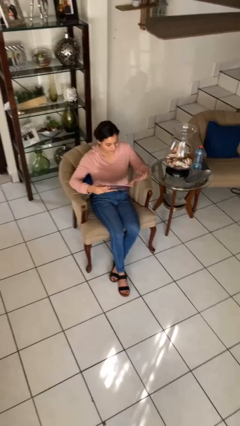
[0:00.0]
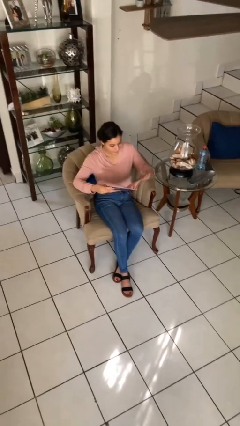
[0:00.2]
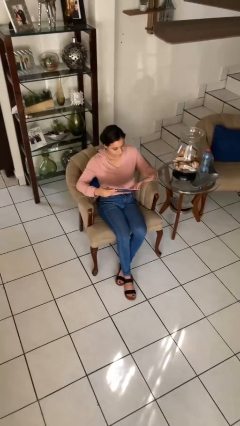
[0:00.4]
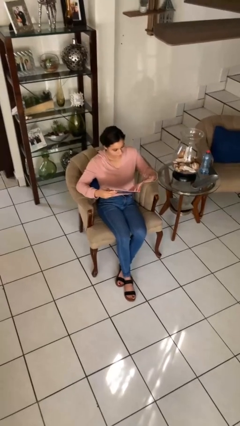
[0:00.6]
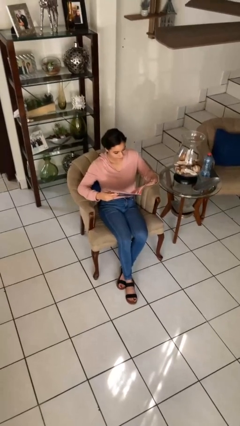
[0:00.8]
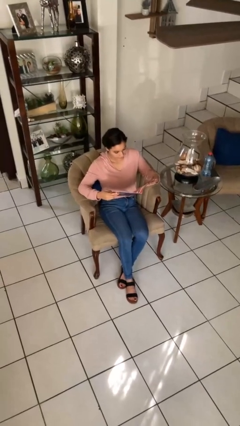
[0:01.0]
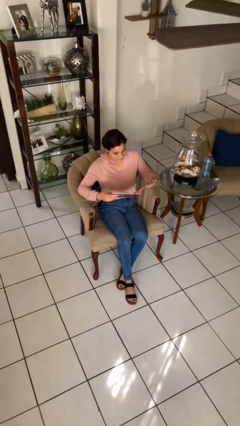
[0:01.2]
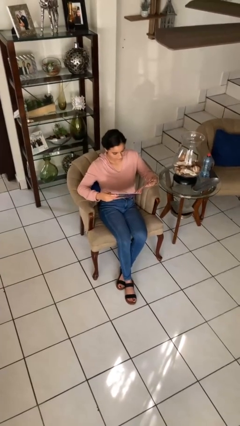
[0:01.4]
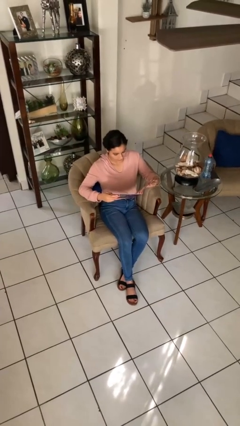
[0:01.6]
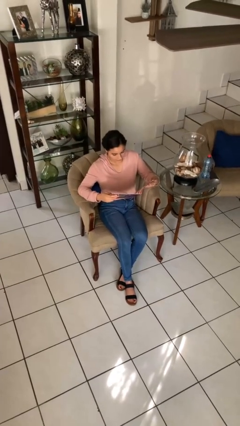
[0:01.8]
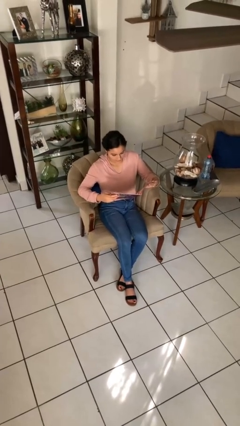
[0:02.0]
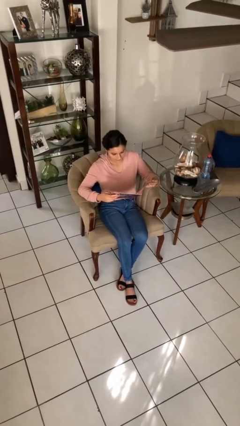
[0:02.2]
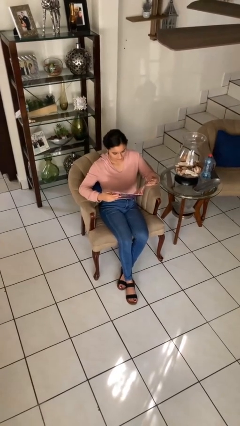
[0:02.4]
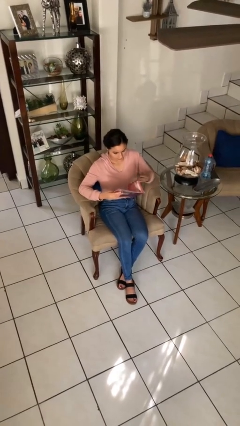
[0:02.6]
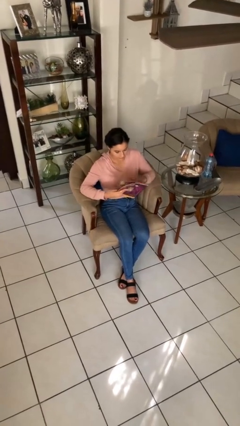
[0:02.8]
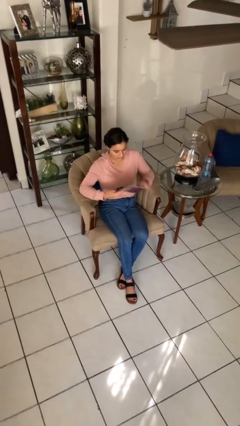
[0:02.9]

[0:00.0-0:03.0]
person reads magazine

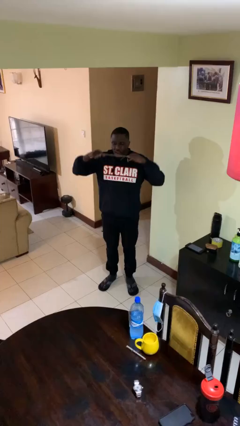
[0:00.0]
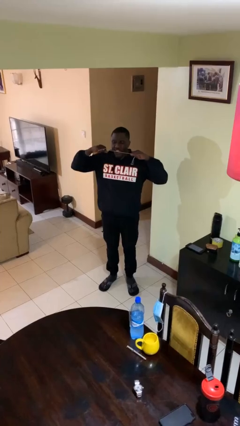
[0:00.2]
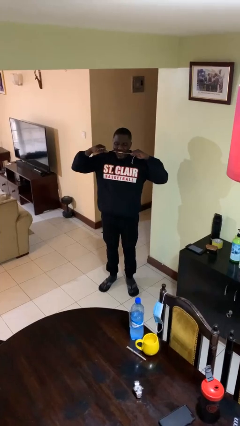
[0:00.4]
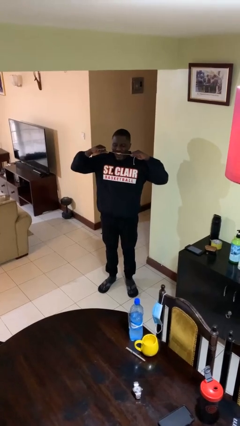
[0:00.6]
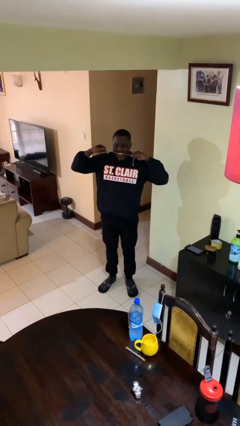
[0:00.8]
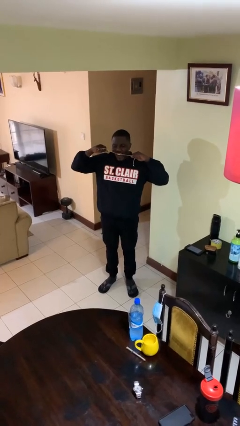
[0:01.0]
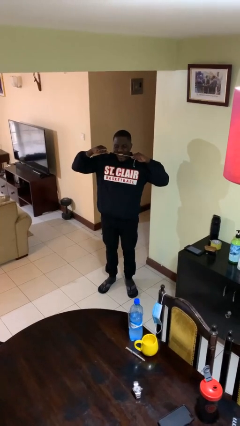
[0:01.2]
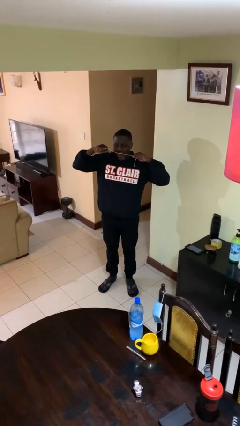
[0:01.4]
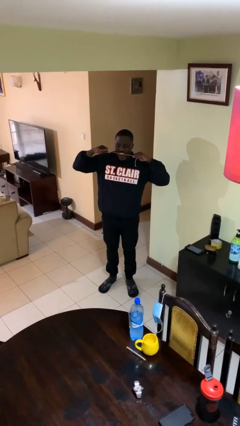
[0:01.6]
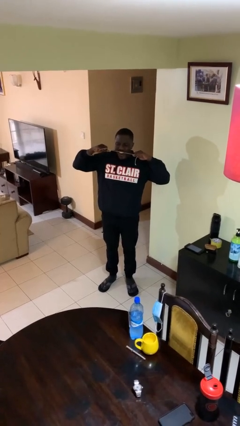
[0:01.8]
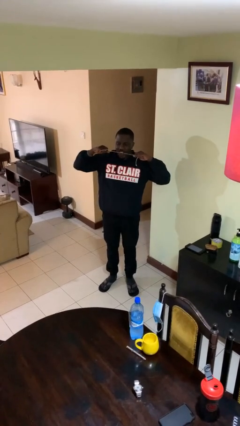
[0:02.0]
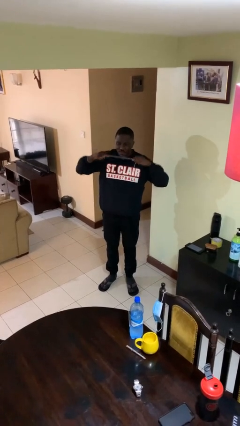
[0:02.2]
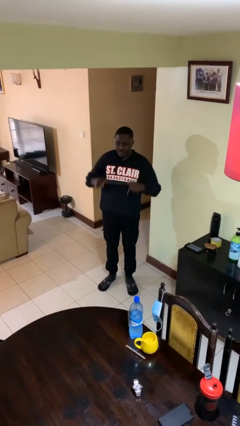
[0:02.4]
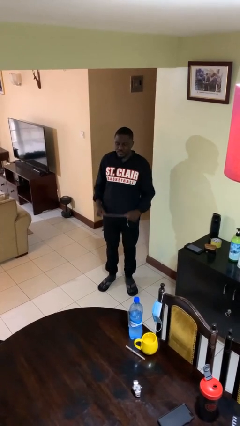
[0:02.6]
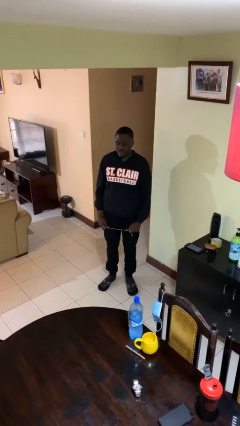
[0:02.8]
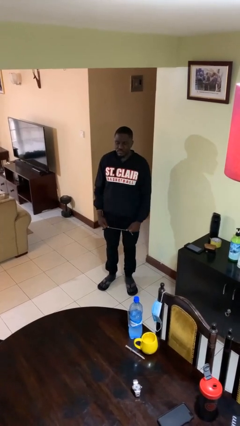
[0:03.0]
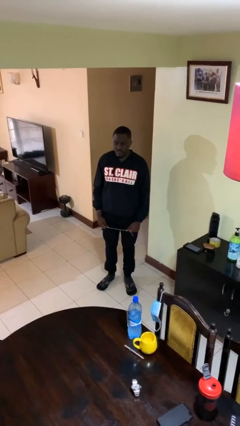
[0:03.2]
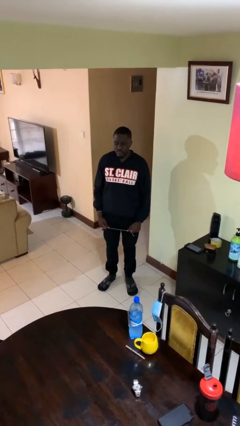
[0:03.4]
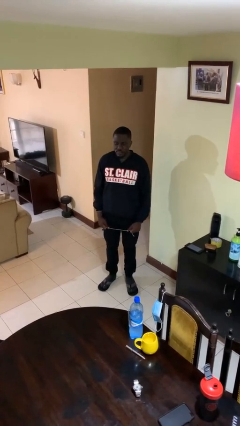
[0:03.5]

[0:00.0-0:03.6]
person flosses

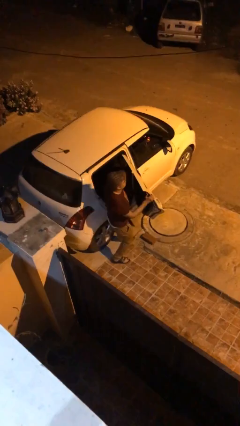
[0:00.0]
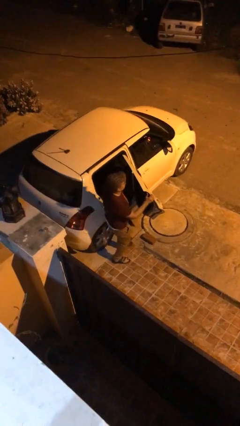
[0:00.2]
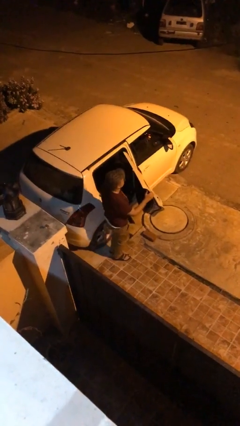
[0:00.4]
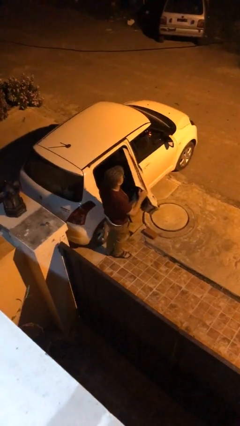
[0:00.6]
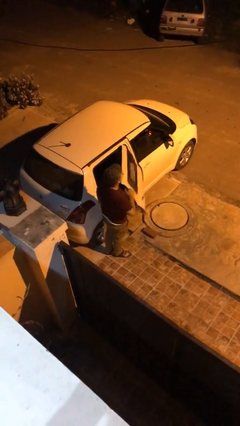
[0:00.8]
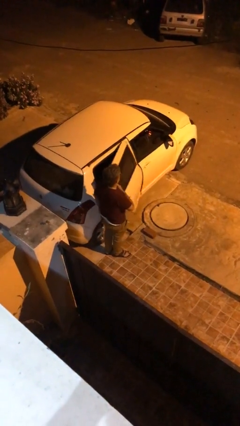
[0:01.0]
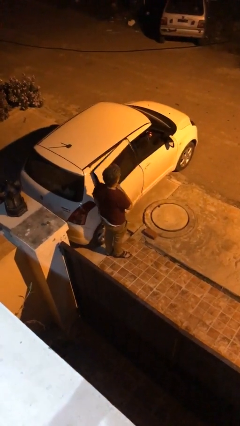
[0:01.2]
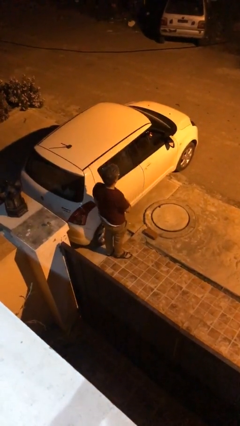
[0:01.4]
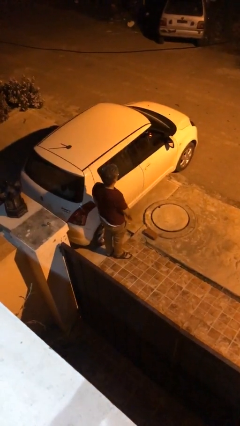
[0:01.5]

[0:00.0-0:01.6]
person closes car door

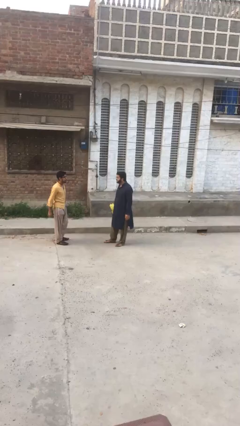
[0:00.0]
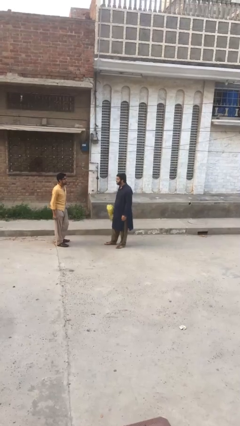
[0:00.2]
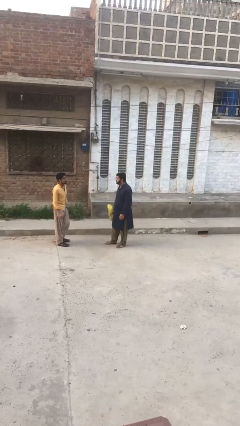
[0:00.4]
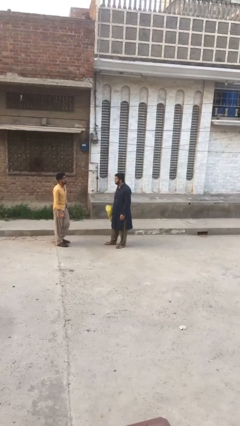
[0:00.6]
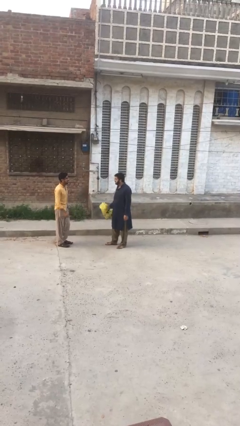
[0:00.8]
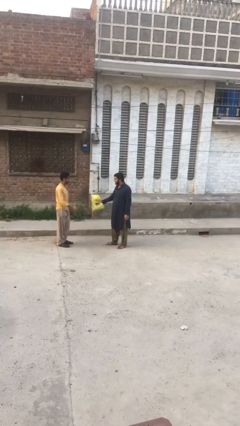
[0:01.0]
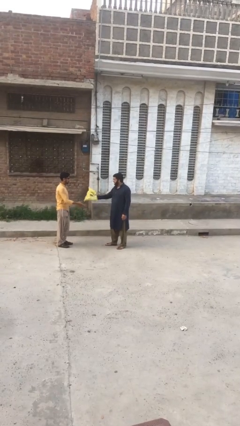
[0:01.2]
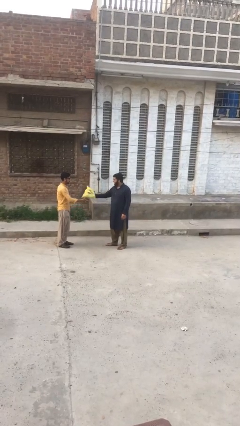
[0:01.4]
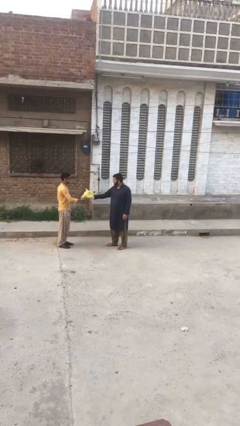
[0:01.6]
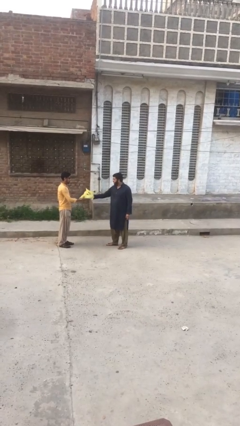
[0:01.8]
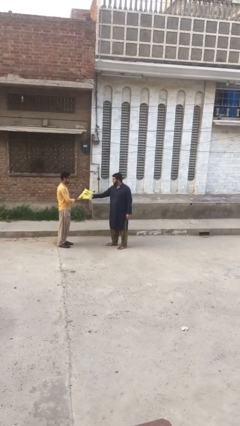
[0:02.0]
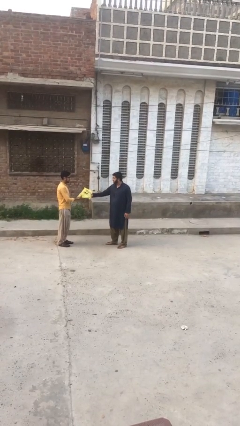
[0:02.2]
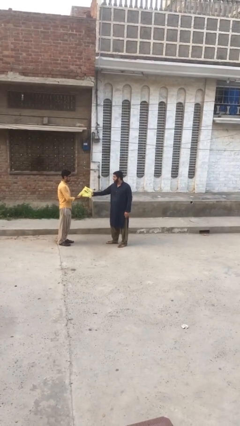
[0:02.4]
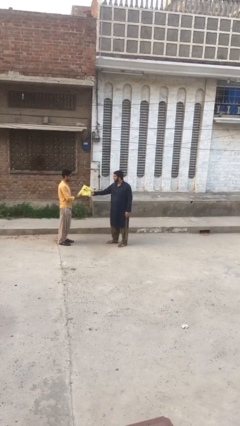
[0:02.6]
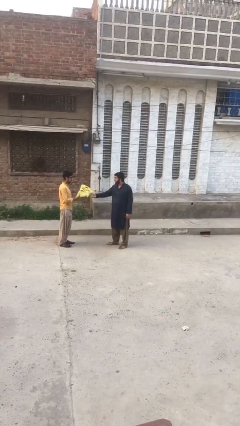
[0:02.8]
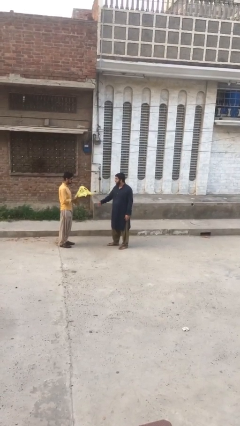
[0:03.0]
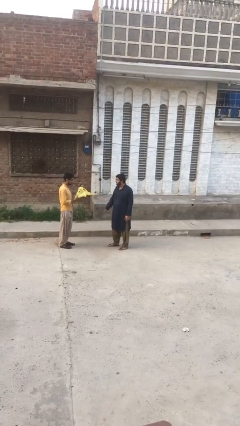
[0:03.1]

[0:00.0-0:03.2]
person transfers object to person

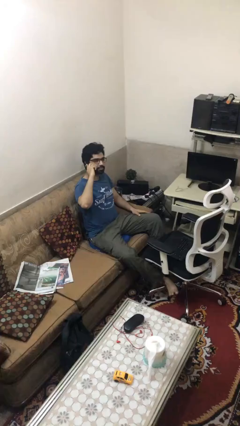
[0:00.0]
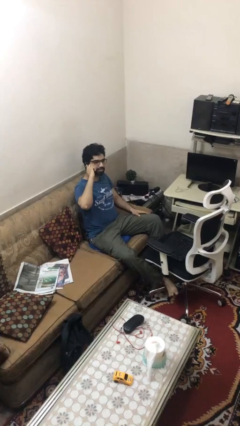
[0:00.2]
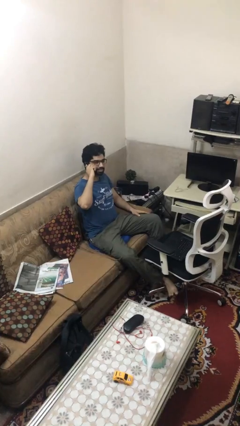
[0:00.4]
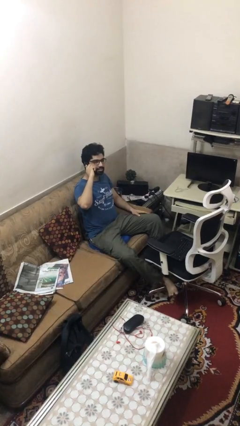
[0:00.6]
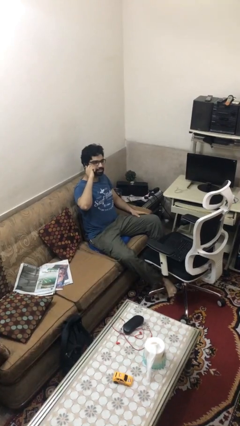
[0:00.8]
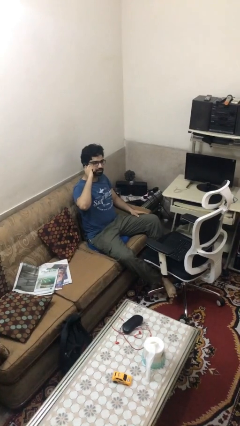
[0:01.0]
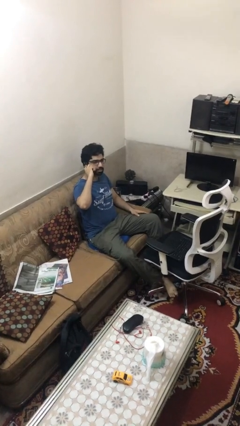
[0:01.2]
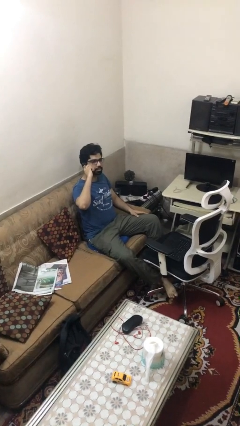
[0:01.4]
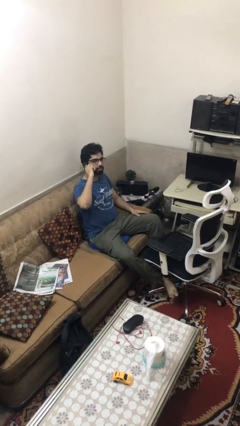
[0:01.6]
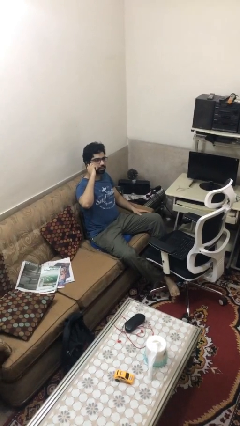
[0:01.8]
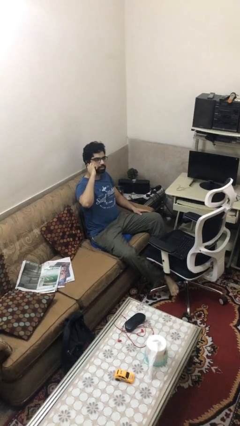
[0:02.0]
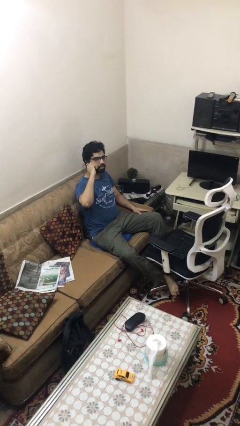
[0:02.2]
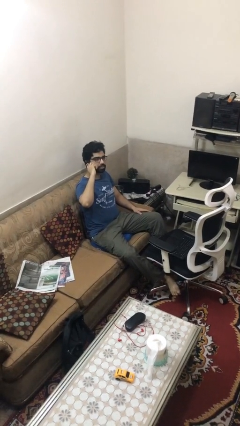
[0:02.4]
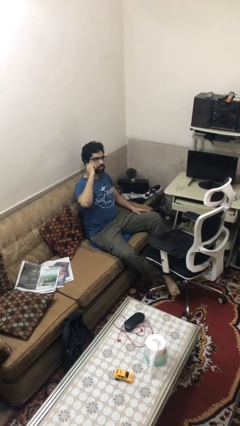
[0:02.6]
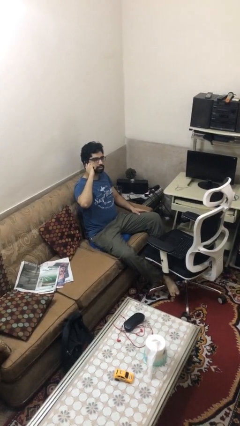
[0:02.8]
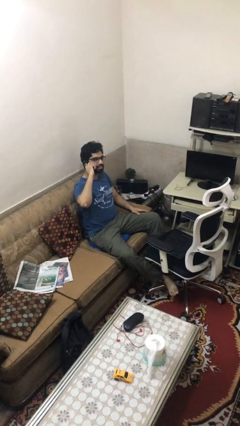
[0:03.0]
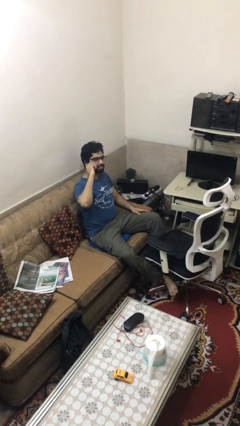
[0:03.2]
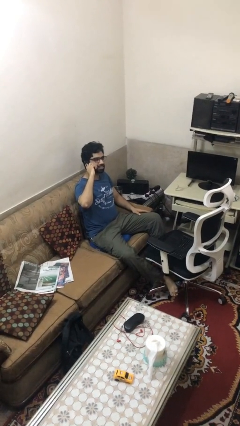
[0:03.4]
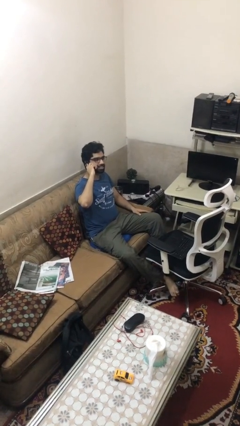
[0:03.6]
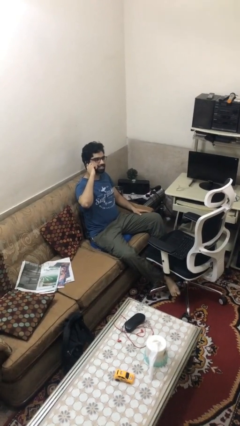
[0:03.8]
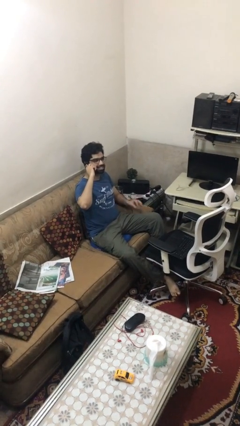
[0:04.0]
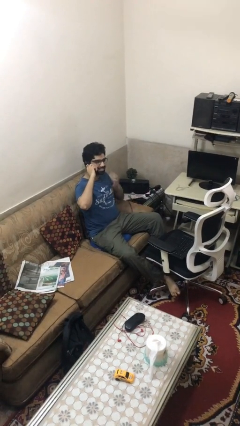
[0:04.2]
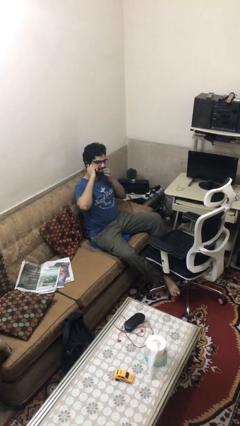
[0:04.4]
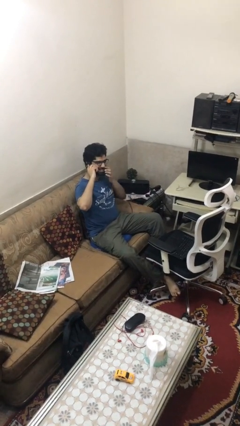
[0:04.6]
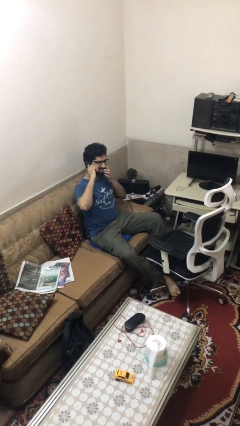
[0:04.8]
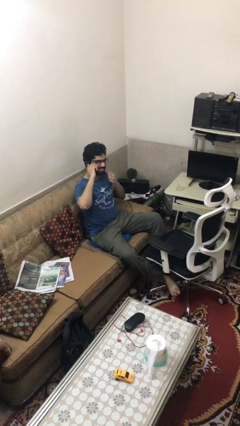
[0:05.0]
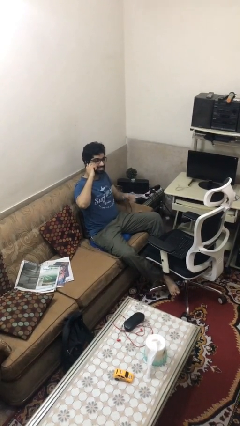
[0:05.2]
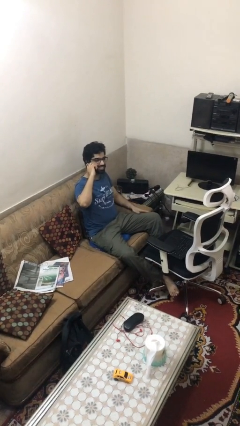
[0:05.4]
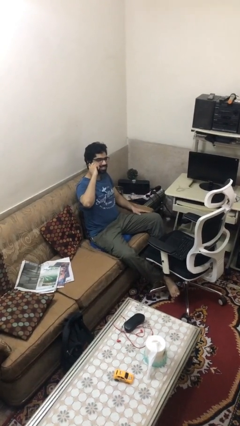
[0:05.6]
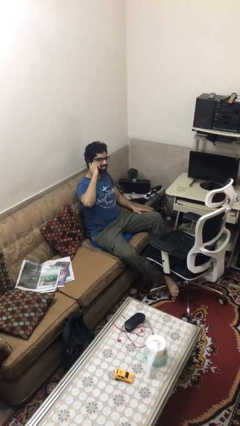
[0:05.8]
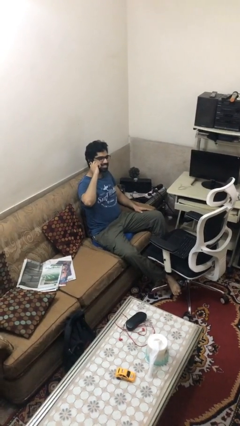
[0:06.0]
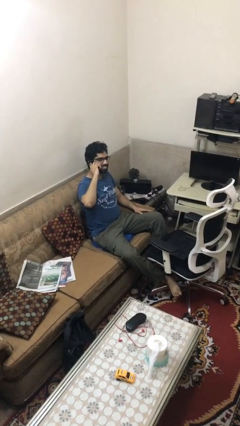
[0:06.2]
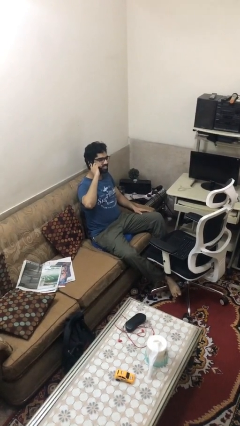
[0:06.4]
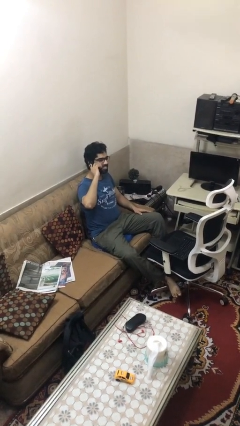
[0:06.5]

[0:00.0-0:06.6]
person talks on phone
